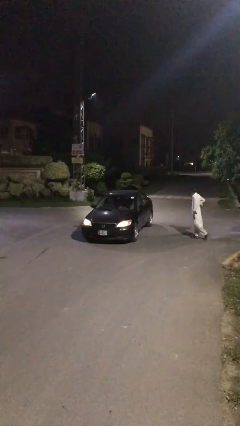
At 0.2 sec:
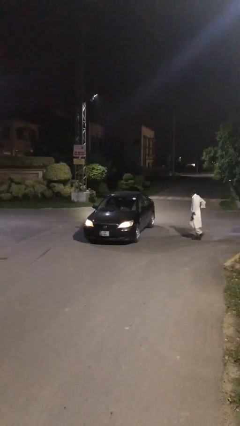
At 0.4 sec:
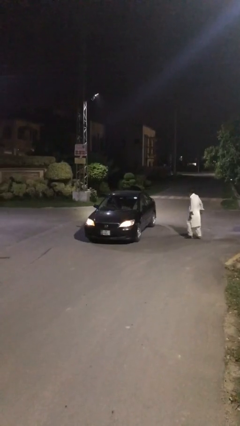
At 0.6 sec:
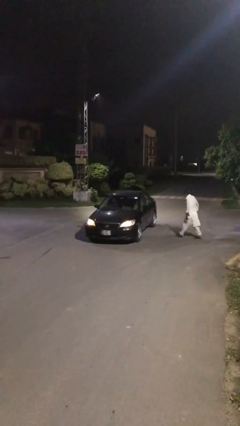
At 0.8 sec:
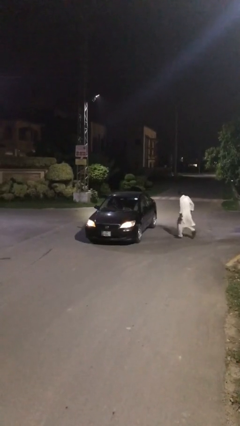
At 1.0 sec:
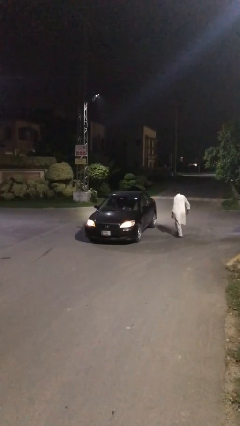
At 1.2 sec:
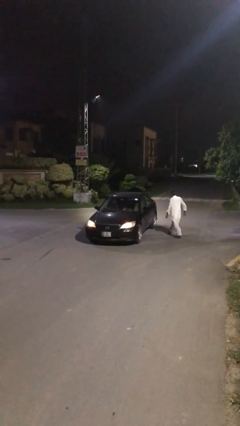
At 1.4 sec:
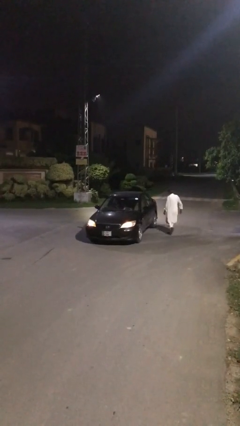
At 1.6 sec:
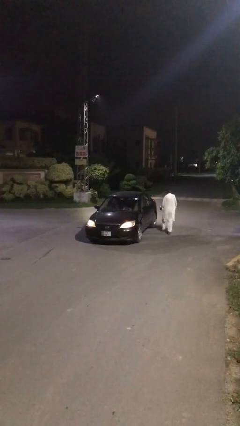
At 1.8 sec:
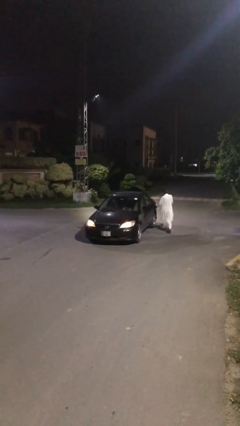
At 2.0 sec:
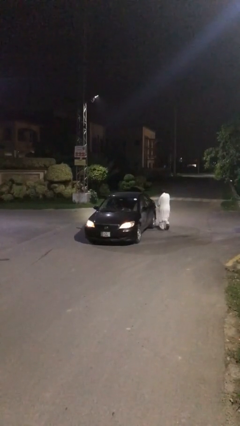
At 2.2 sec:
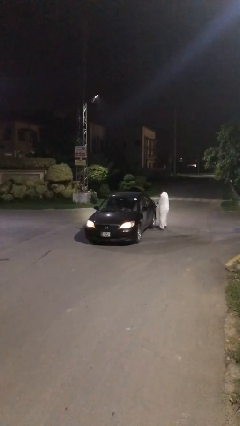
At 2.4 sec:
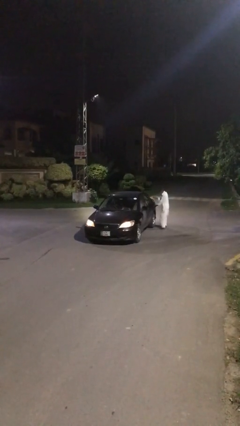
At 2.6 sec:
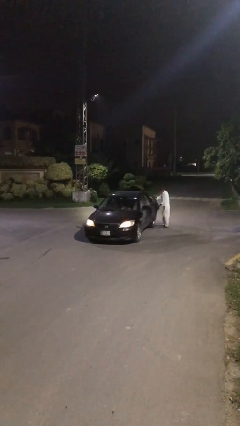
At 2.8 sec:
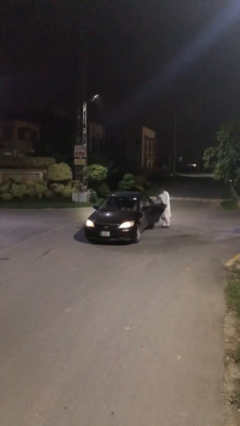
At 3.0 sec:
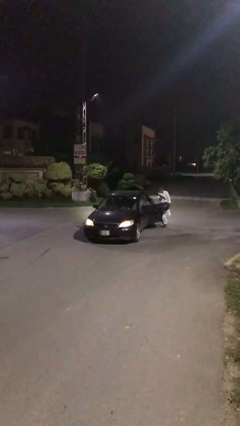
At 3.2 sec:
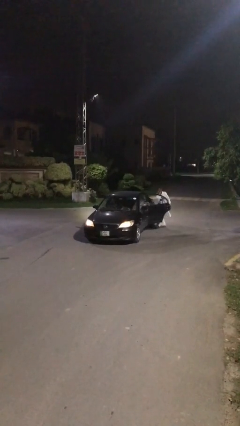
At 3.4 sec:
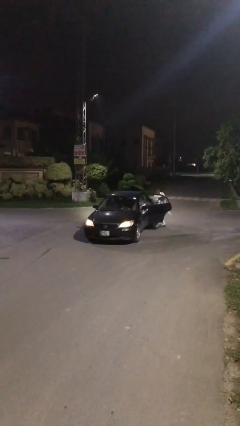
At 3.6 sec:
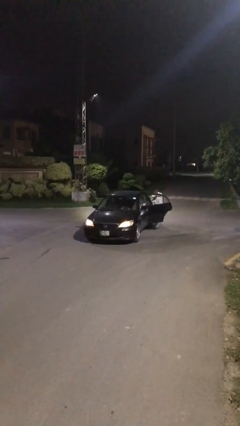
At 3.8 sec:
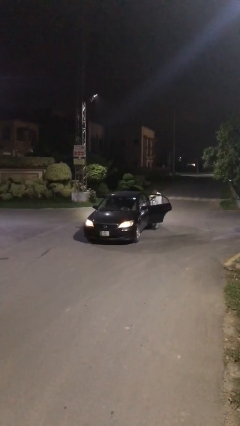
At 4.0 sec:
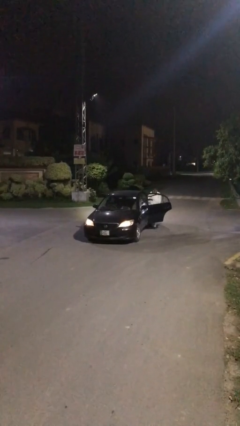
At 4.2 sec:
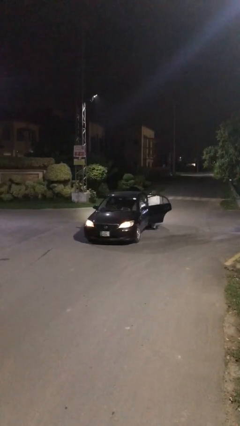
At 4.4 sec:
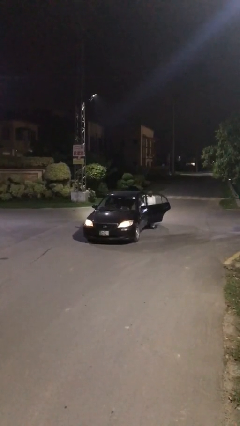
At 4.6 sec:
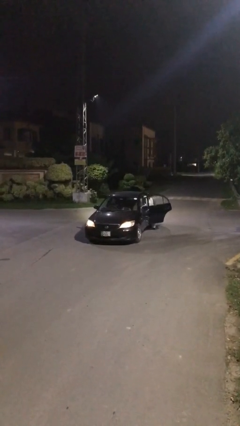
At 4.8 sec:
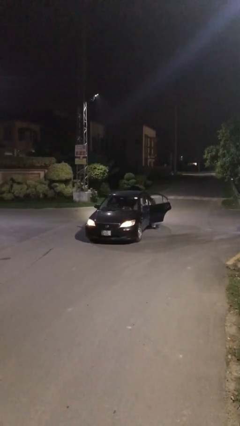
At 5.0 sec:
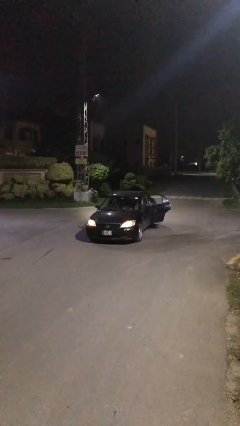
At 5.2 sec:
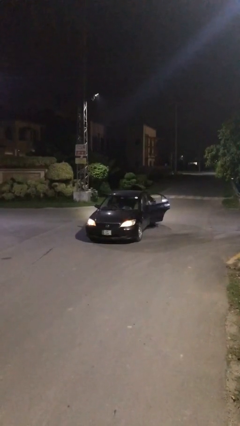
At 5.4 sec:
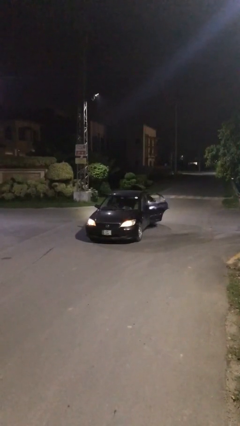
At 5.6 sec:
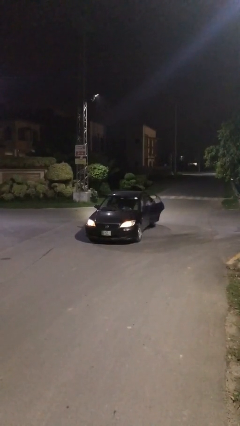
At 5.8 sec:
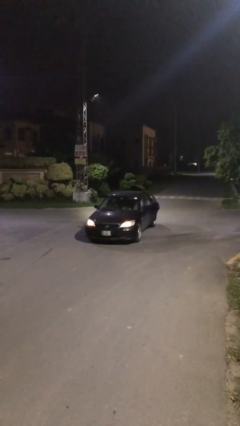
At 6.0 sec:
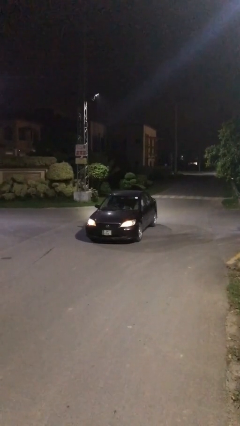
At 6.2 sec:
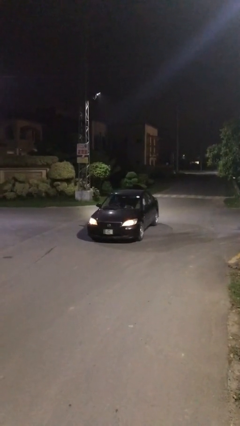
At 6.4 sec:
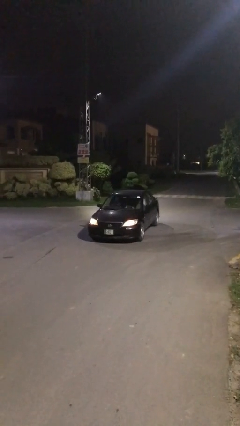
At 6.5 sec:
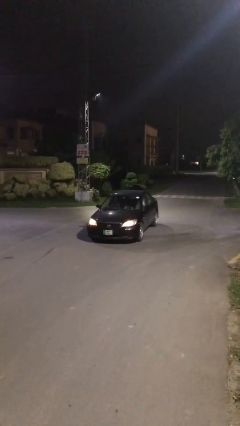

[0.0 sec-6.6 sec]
car picks up person

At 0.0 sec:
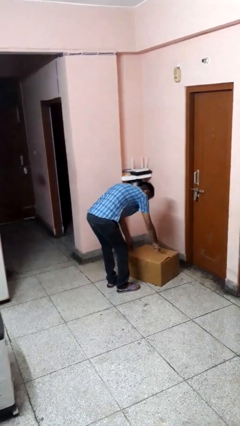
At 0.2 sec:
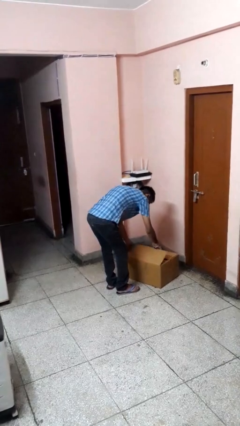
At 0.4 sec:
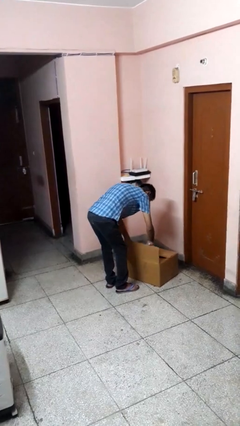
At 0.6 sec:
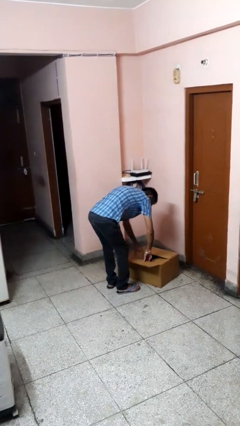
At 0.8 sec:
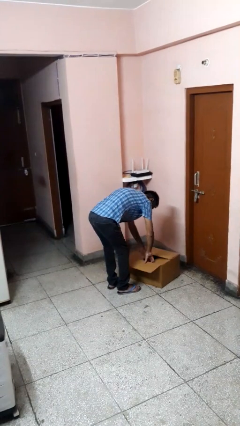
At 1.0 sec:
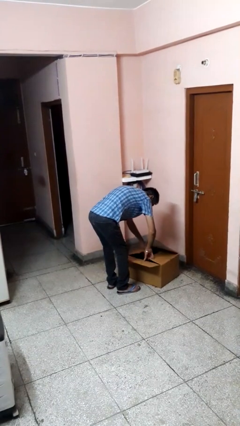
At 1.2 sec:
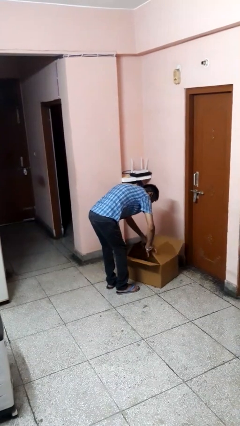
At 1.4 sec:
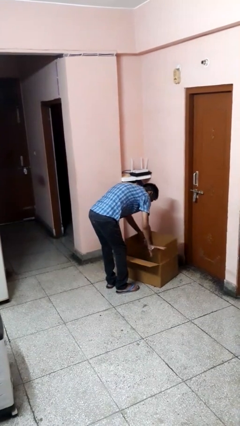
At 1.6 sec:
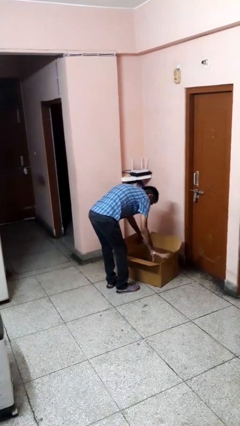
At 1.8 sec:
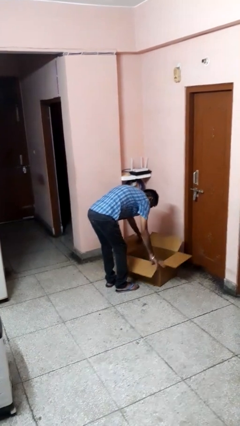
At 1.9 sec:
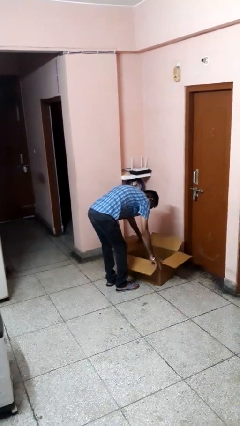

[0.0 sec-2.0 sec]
person opens box

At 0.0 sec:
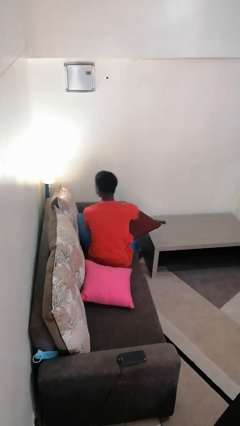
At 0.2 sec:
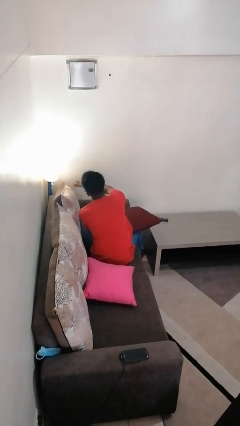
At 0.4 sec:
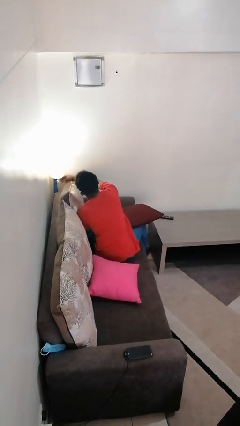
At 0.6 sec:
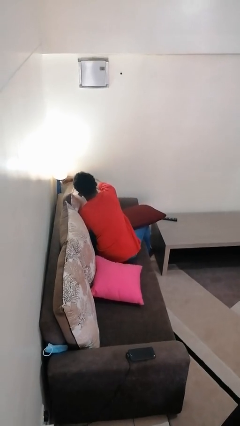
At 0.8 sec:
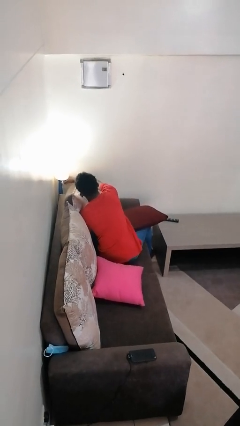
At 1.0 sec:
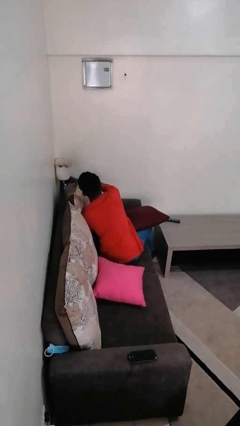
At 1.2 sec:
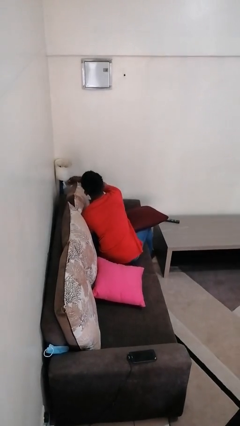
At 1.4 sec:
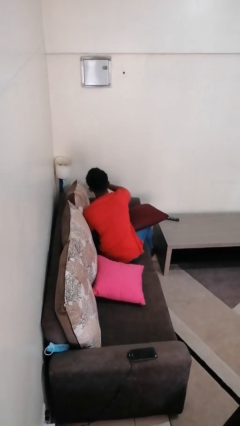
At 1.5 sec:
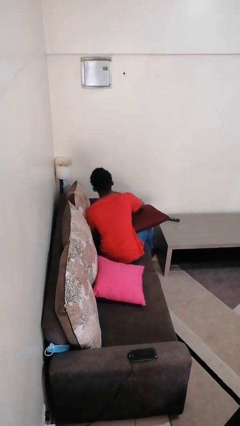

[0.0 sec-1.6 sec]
person turns off lamp

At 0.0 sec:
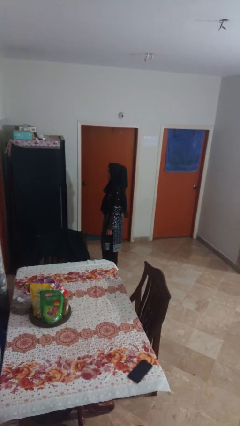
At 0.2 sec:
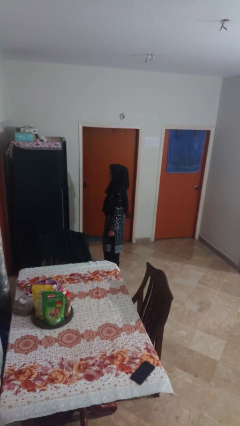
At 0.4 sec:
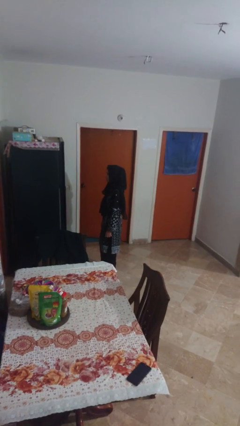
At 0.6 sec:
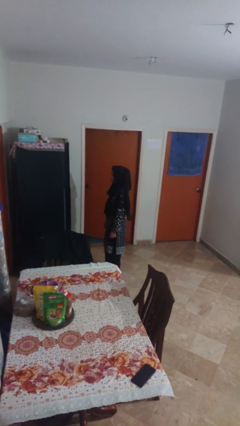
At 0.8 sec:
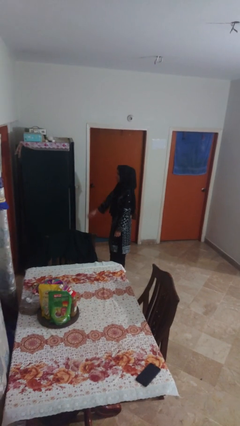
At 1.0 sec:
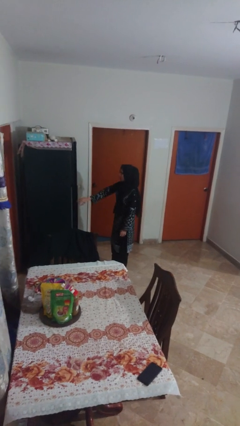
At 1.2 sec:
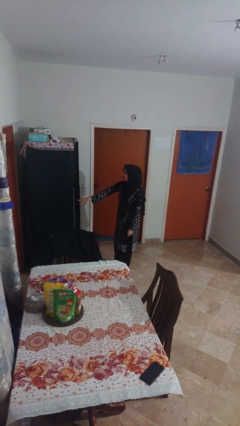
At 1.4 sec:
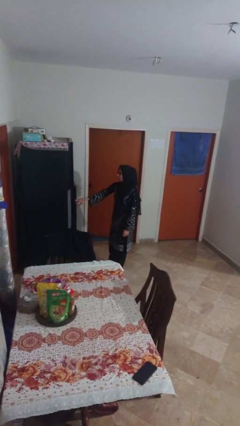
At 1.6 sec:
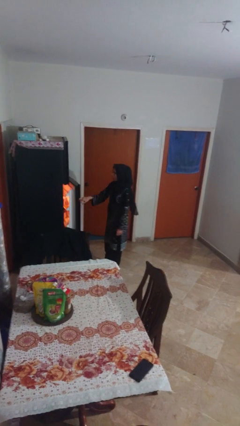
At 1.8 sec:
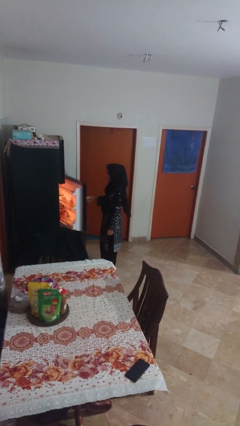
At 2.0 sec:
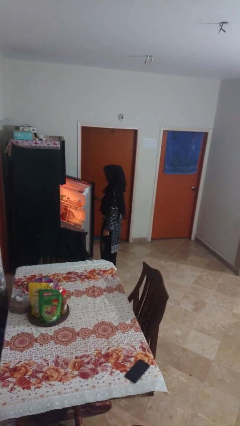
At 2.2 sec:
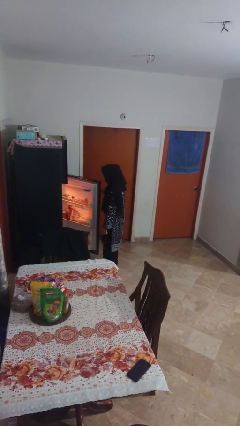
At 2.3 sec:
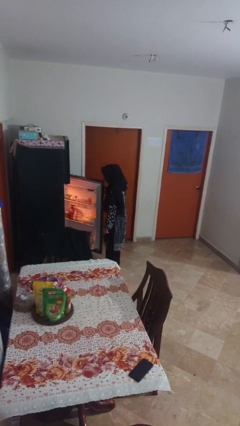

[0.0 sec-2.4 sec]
person opens refrigerator

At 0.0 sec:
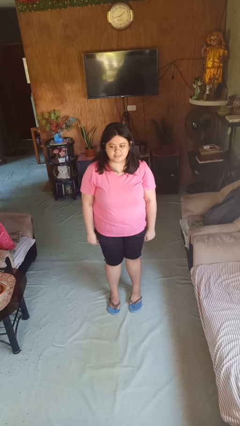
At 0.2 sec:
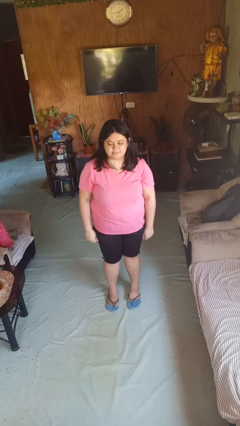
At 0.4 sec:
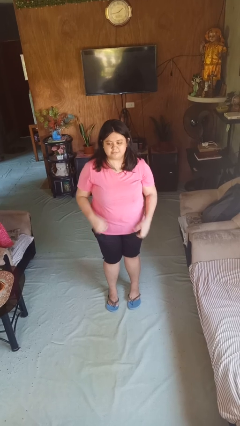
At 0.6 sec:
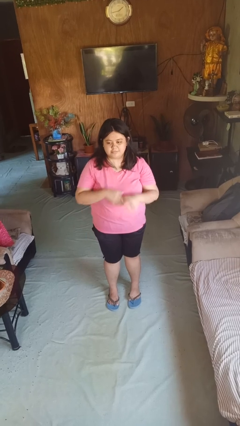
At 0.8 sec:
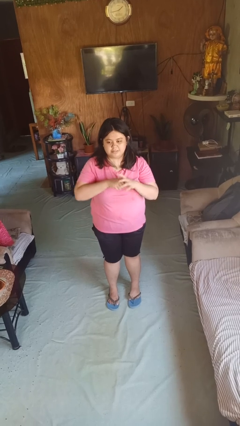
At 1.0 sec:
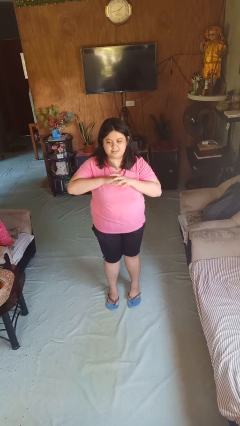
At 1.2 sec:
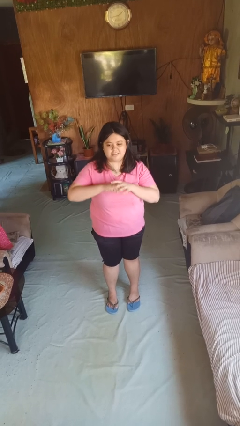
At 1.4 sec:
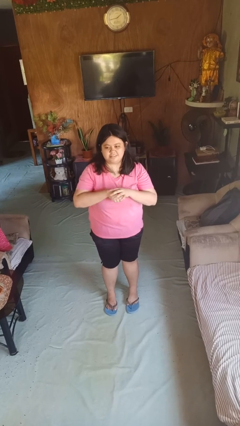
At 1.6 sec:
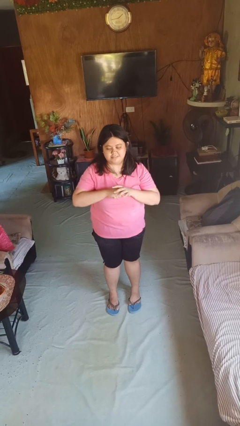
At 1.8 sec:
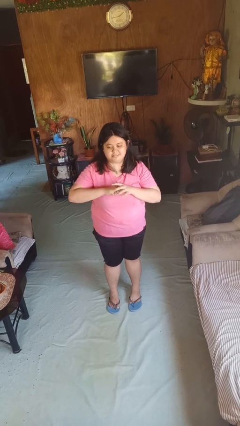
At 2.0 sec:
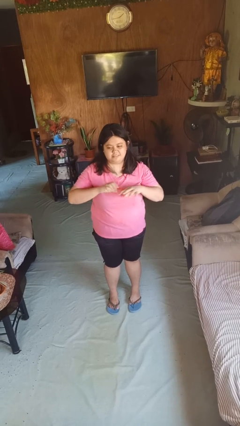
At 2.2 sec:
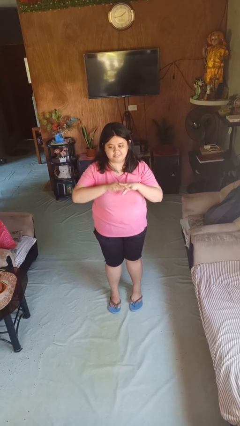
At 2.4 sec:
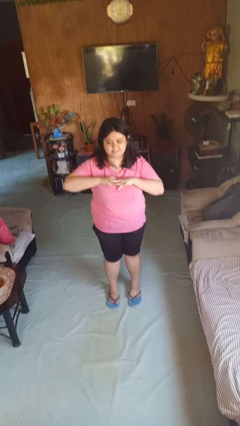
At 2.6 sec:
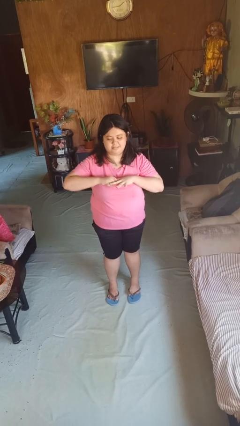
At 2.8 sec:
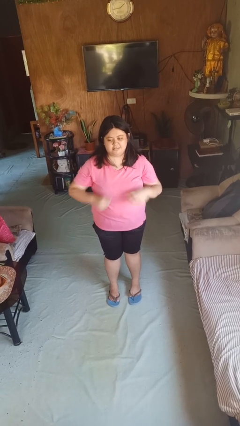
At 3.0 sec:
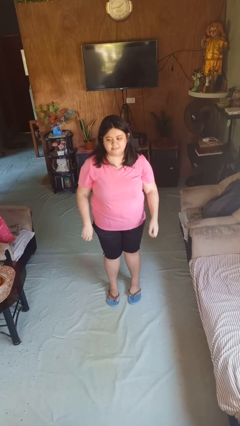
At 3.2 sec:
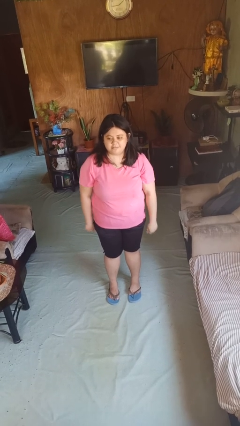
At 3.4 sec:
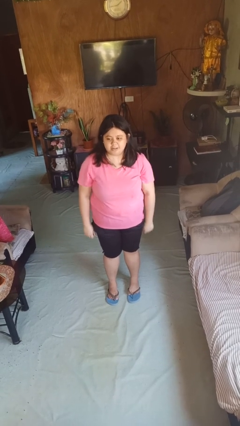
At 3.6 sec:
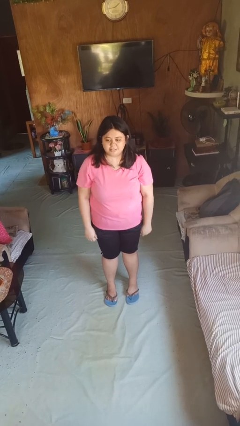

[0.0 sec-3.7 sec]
person cracks knuckles

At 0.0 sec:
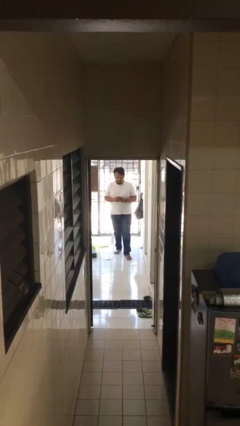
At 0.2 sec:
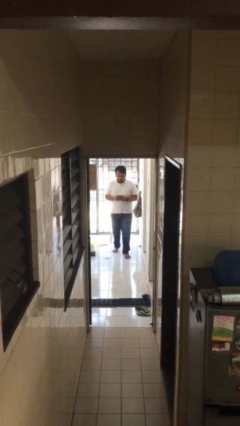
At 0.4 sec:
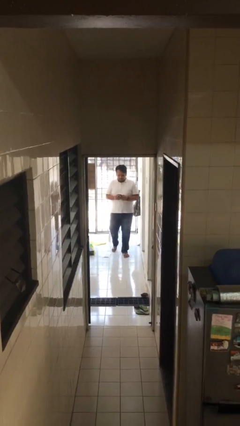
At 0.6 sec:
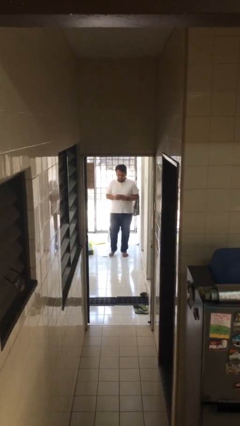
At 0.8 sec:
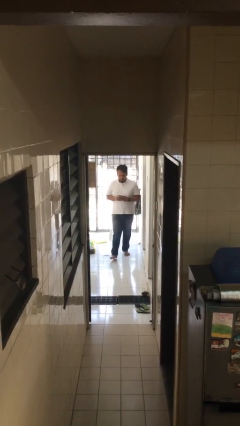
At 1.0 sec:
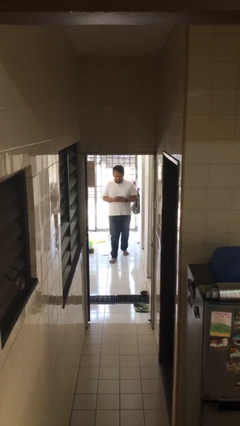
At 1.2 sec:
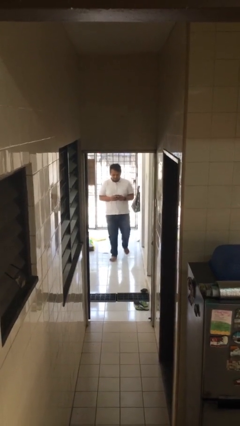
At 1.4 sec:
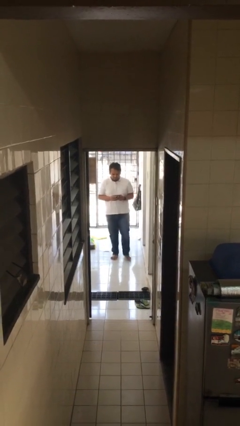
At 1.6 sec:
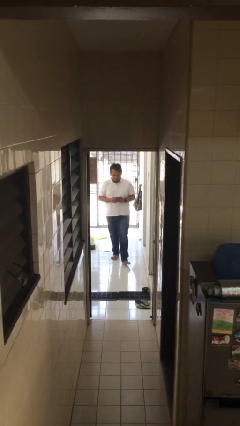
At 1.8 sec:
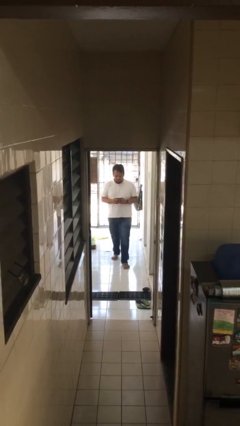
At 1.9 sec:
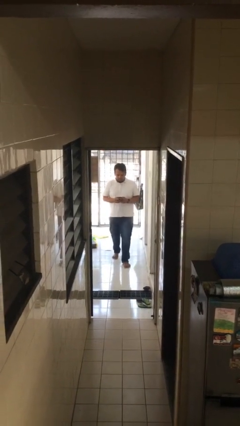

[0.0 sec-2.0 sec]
person texts on phone